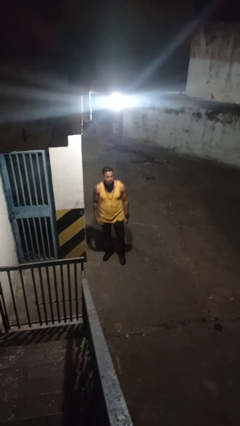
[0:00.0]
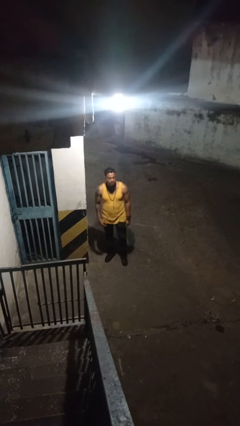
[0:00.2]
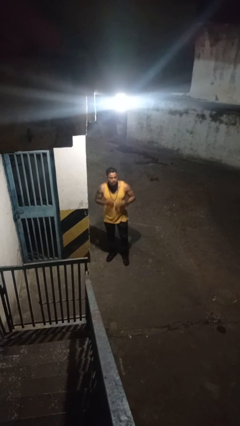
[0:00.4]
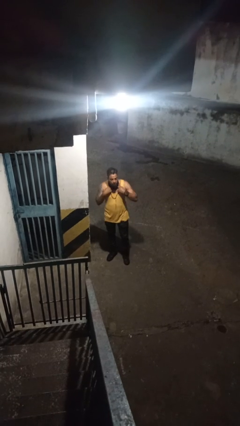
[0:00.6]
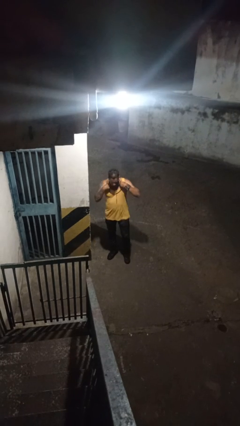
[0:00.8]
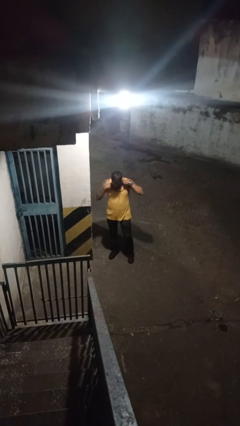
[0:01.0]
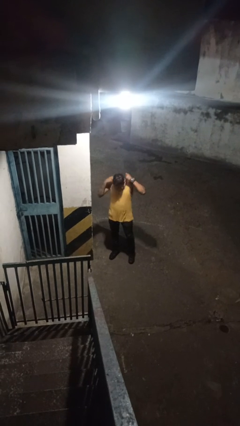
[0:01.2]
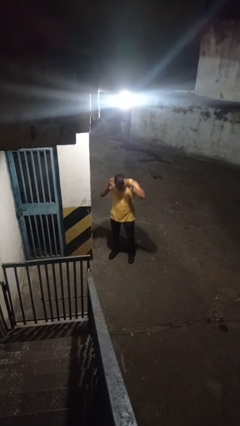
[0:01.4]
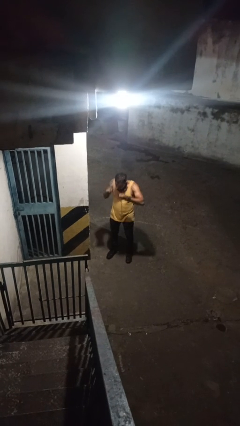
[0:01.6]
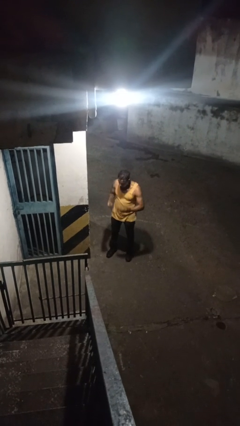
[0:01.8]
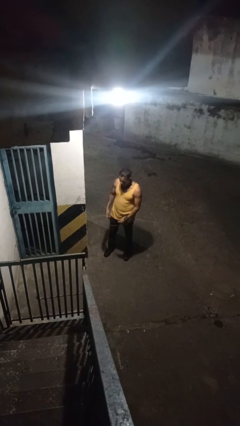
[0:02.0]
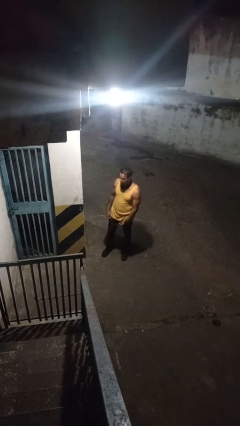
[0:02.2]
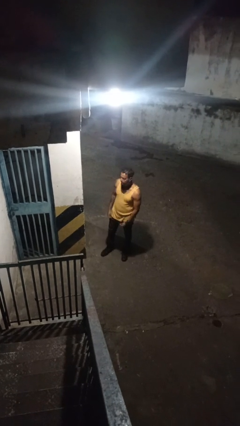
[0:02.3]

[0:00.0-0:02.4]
person takes off necklace

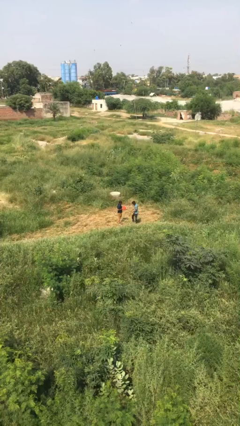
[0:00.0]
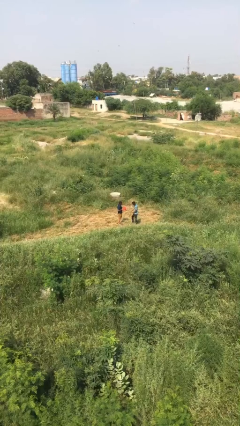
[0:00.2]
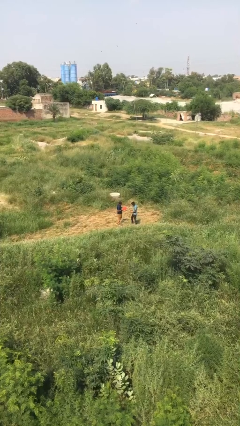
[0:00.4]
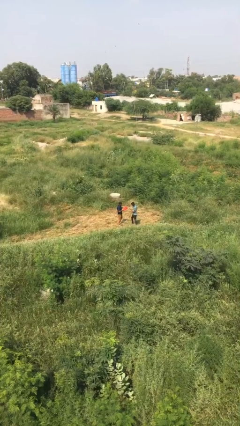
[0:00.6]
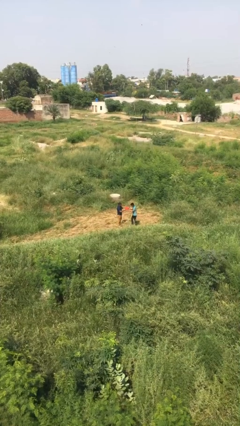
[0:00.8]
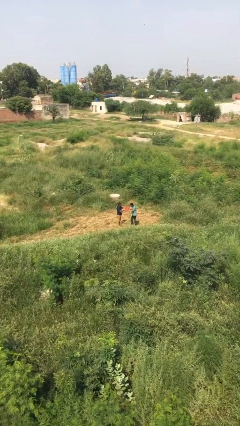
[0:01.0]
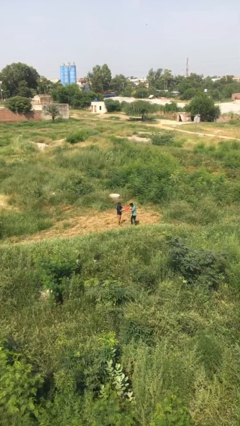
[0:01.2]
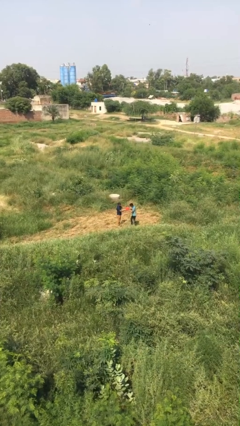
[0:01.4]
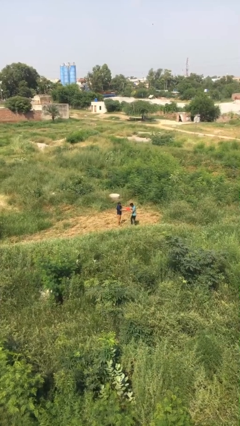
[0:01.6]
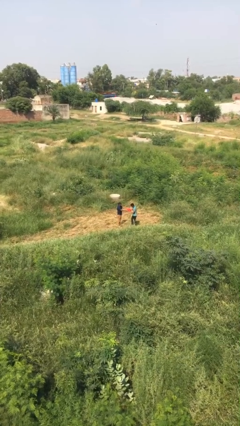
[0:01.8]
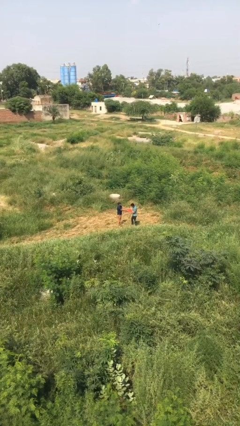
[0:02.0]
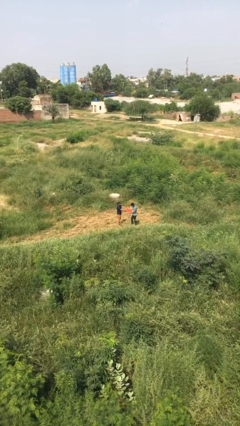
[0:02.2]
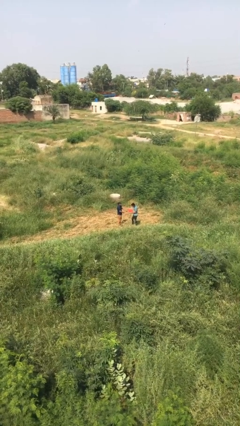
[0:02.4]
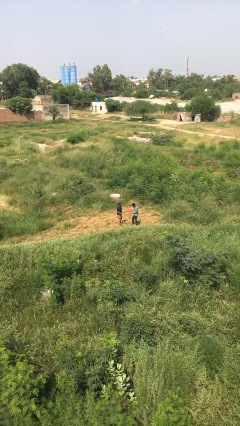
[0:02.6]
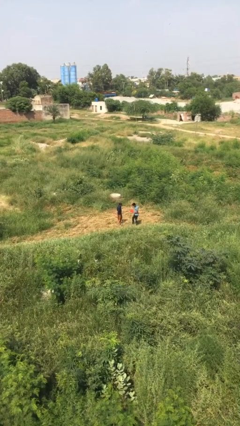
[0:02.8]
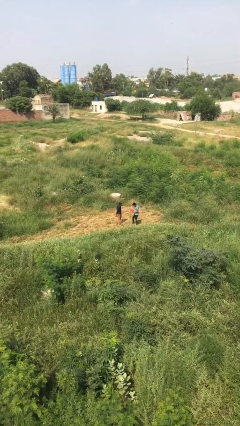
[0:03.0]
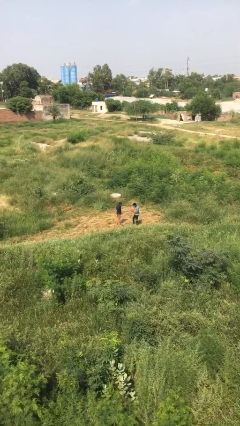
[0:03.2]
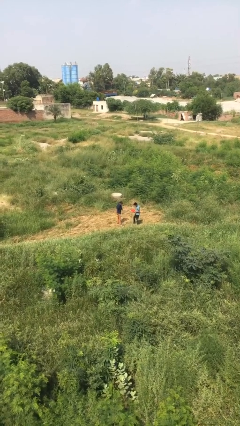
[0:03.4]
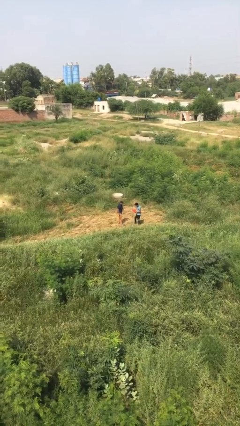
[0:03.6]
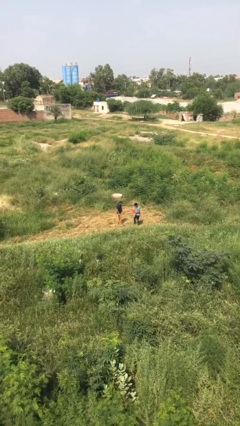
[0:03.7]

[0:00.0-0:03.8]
person transfers object to person

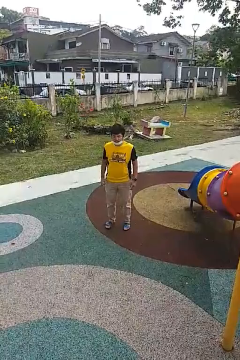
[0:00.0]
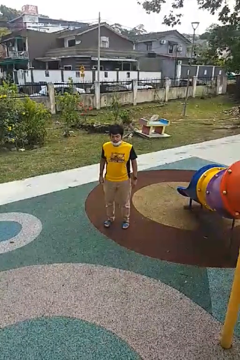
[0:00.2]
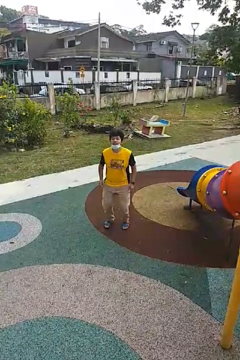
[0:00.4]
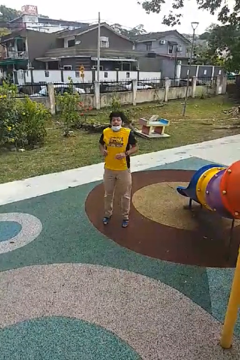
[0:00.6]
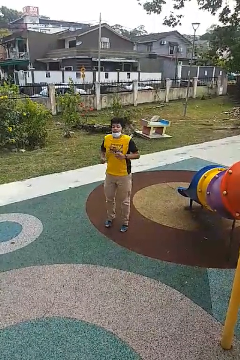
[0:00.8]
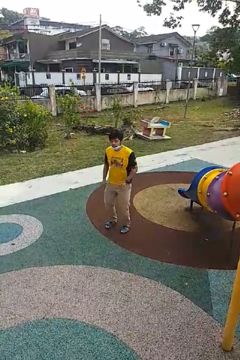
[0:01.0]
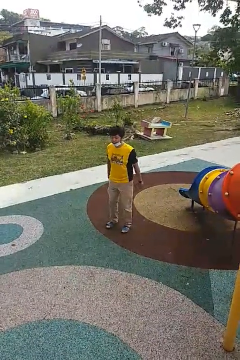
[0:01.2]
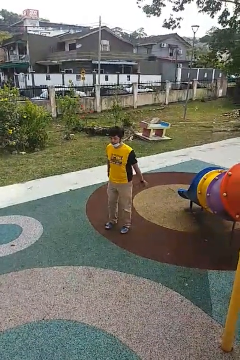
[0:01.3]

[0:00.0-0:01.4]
person jumps

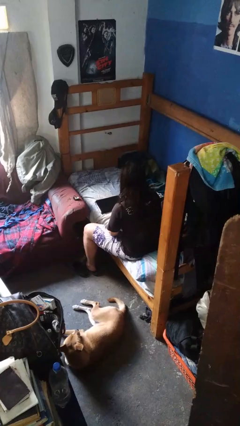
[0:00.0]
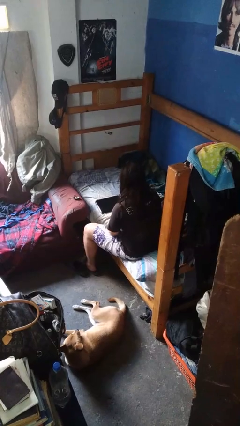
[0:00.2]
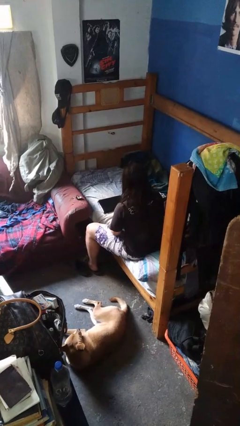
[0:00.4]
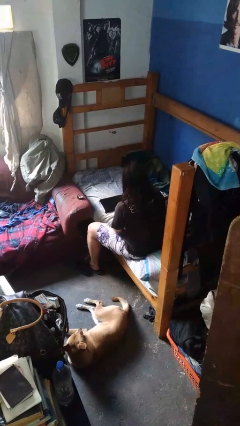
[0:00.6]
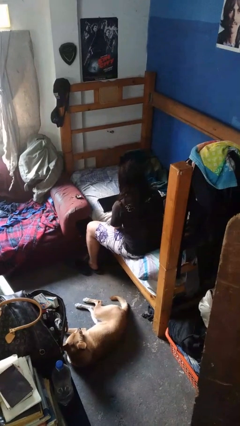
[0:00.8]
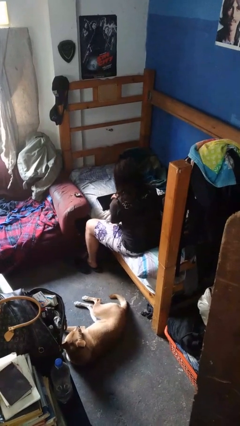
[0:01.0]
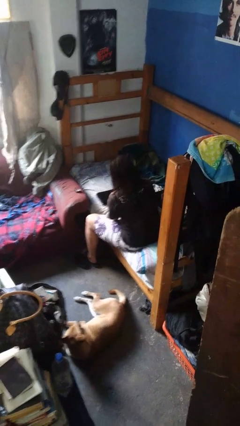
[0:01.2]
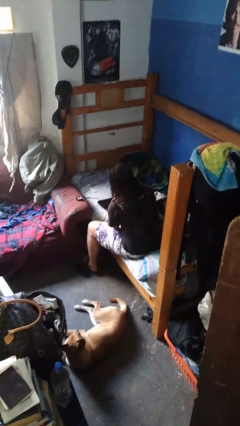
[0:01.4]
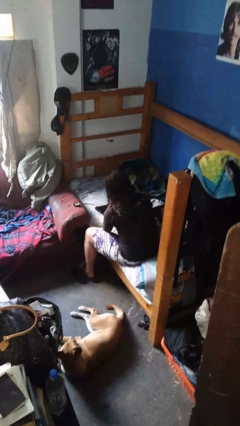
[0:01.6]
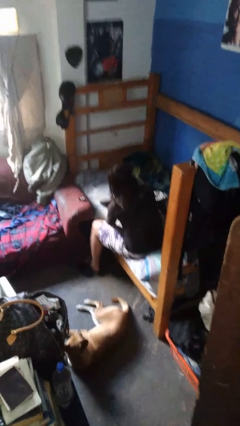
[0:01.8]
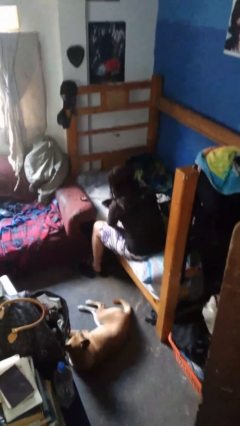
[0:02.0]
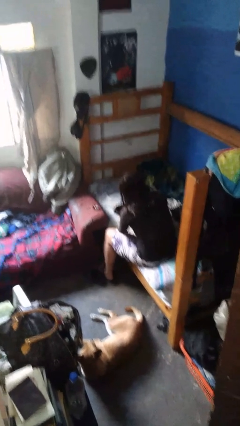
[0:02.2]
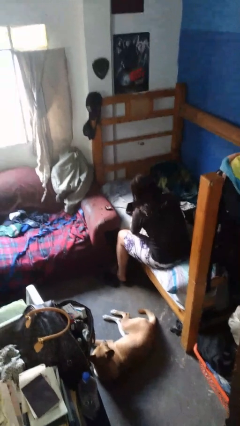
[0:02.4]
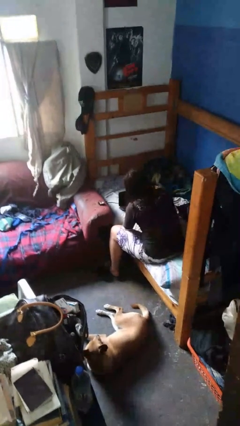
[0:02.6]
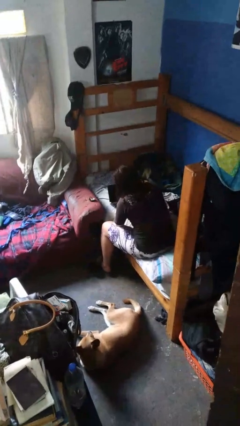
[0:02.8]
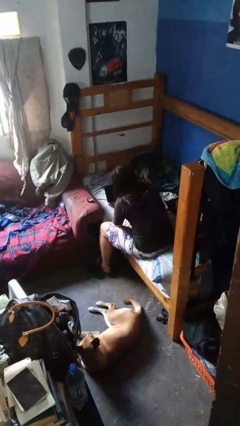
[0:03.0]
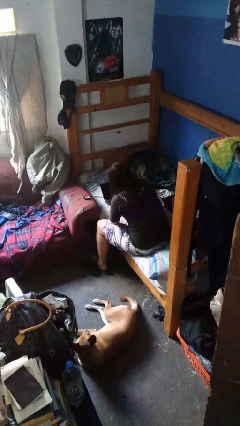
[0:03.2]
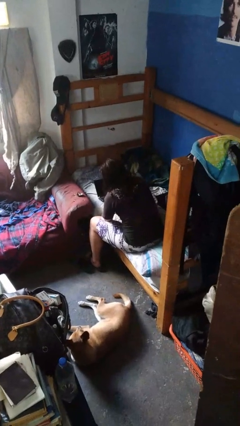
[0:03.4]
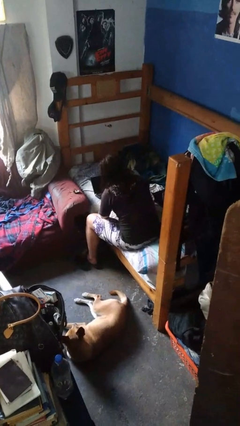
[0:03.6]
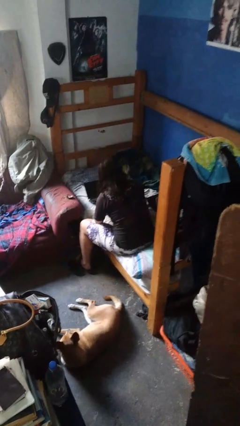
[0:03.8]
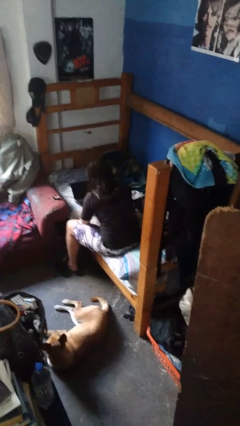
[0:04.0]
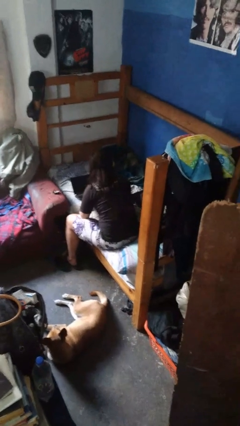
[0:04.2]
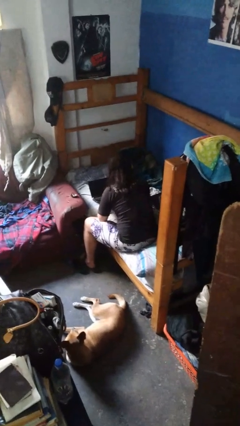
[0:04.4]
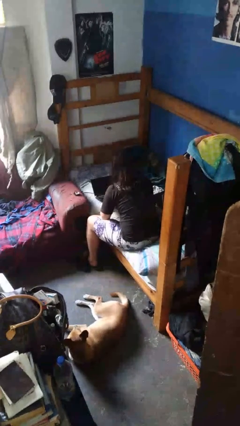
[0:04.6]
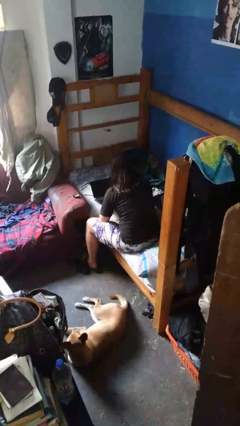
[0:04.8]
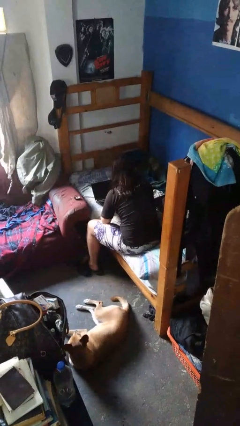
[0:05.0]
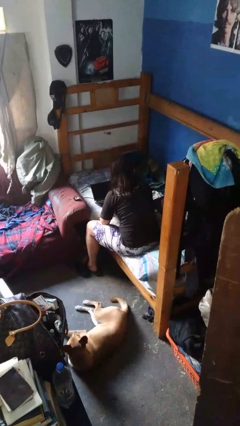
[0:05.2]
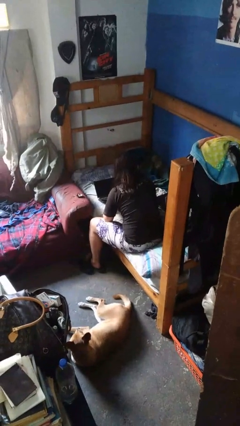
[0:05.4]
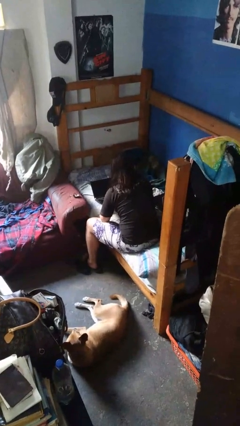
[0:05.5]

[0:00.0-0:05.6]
person opens laptop

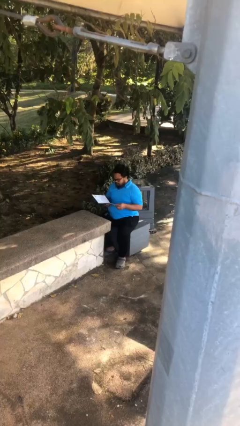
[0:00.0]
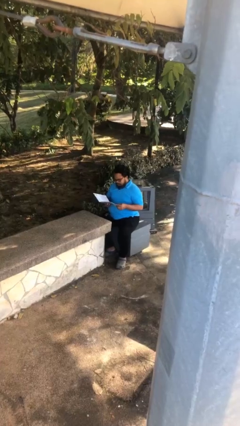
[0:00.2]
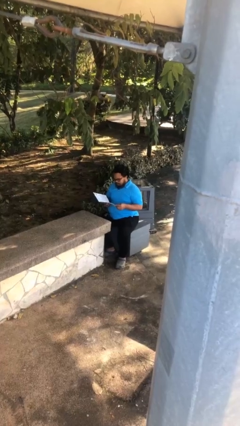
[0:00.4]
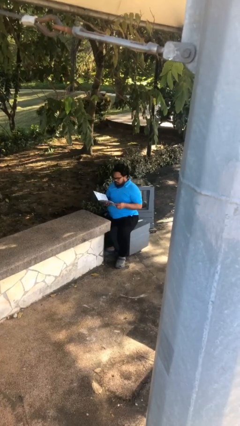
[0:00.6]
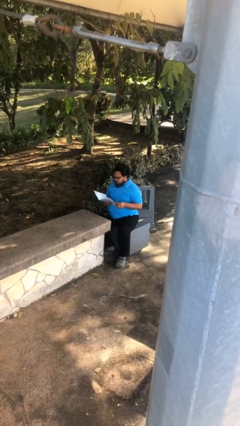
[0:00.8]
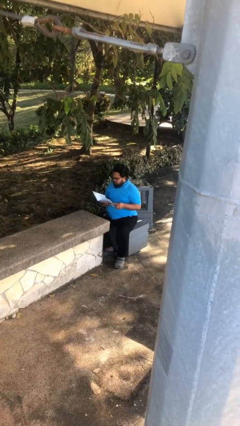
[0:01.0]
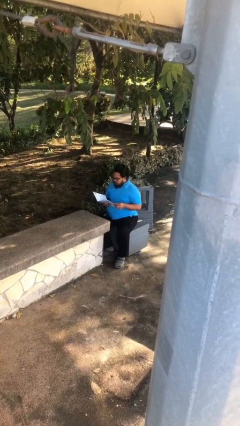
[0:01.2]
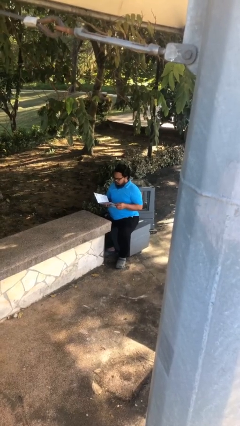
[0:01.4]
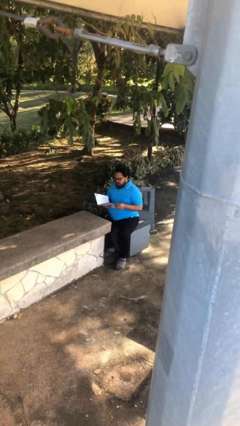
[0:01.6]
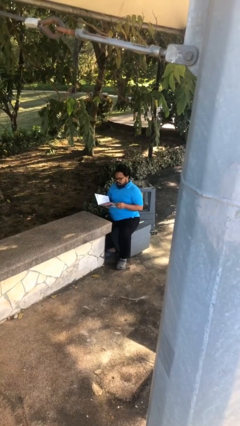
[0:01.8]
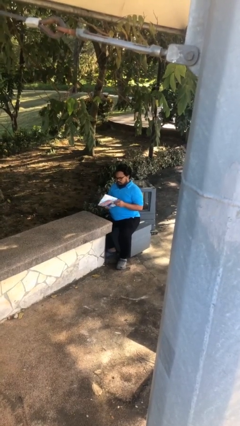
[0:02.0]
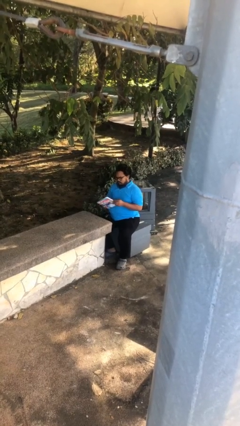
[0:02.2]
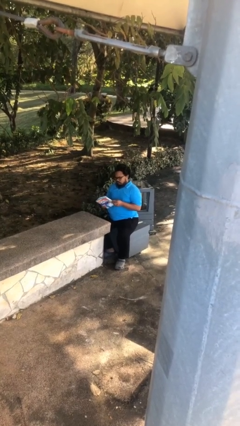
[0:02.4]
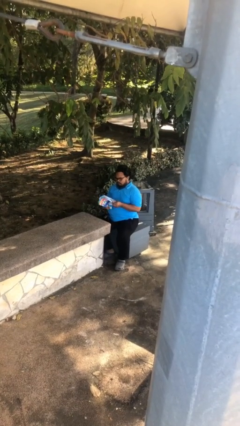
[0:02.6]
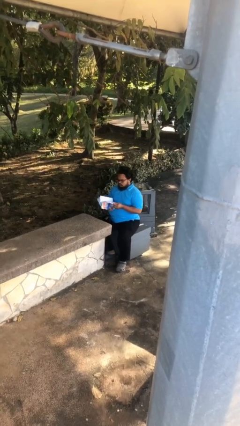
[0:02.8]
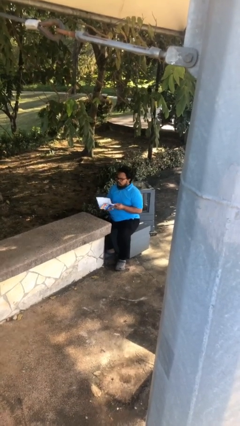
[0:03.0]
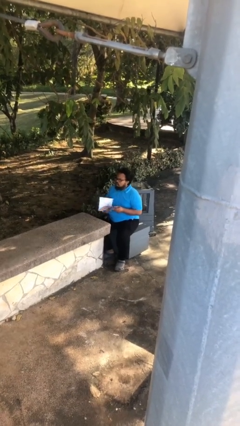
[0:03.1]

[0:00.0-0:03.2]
person reads document

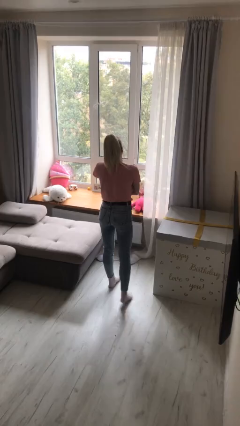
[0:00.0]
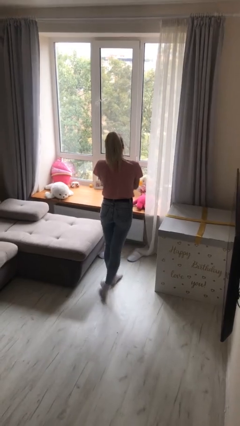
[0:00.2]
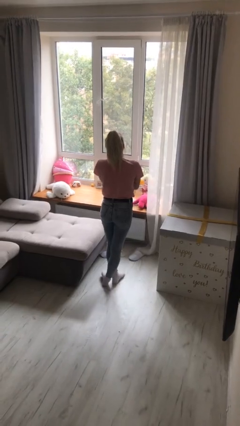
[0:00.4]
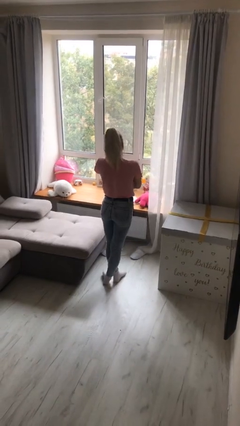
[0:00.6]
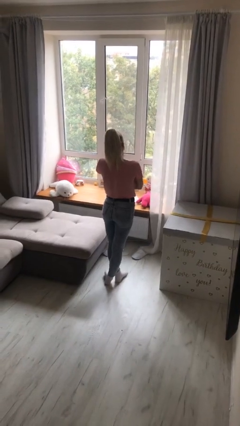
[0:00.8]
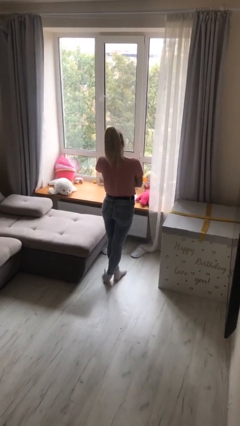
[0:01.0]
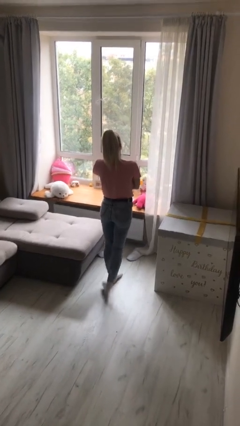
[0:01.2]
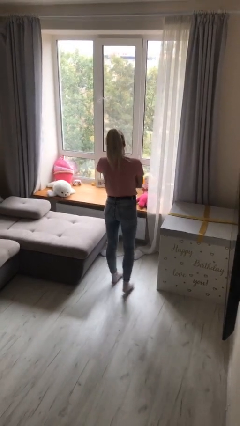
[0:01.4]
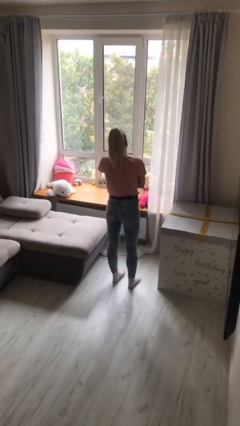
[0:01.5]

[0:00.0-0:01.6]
person crosses legs
